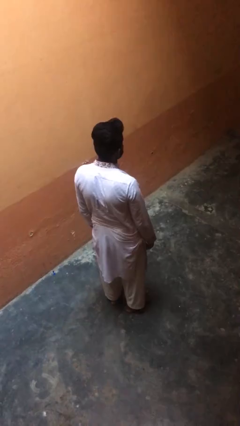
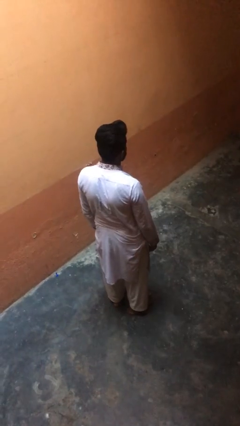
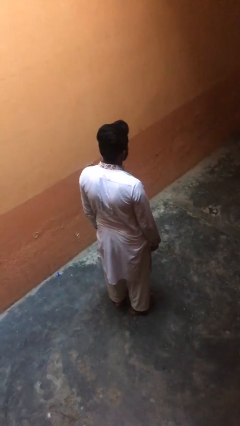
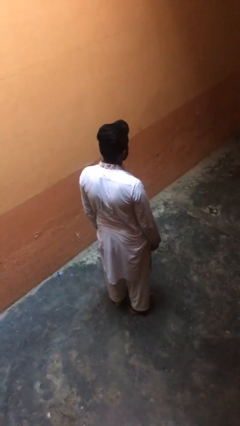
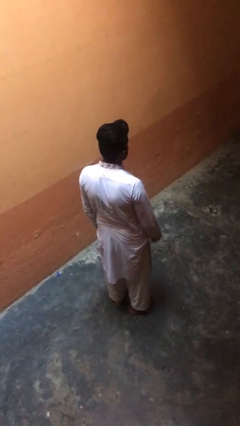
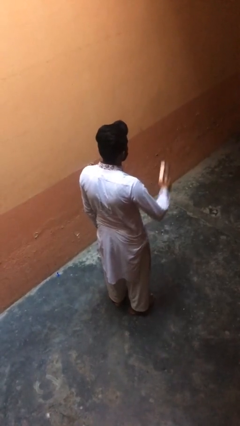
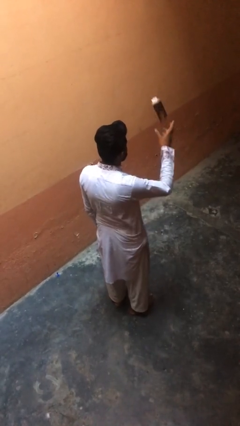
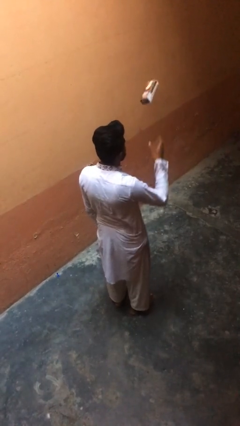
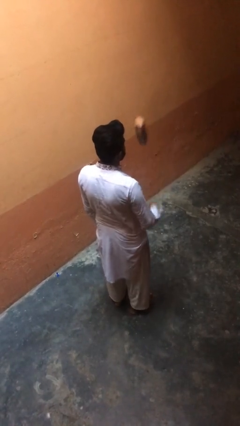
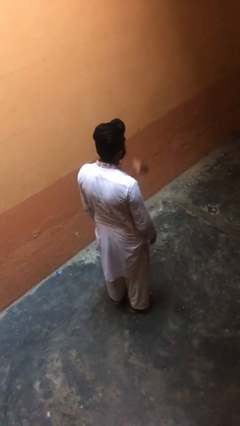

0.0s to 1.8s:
person throws object into air

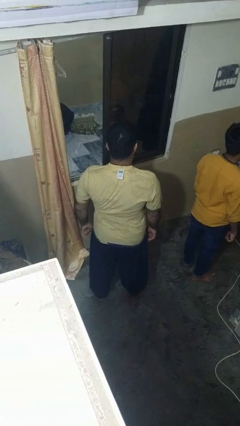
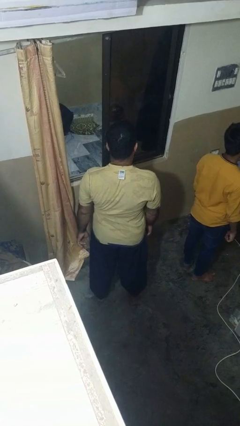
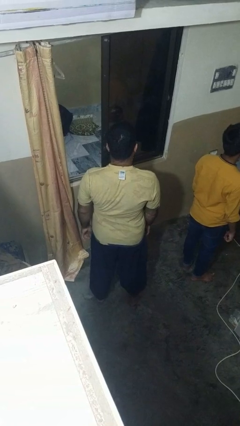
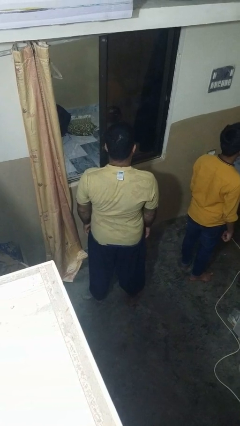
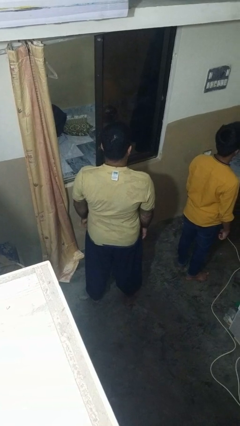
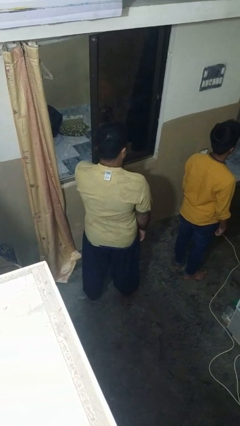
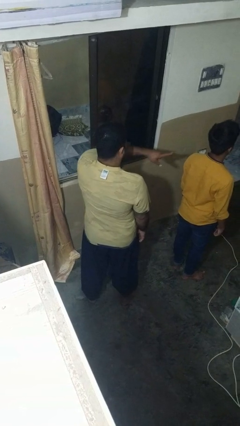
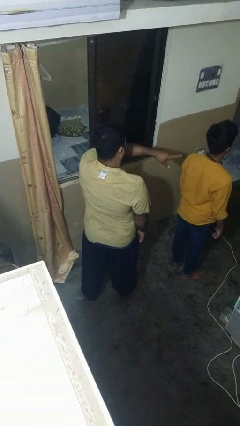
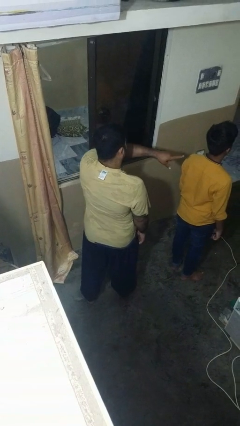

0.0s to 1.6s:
person points at person

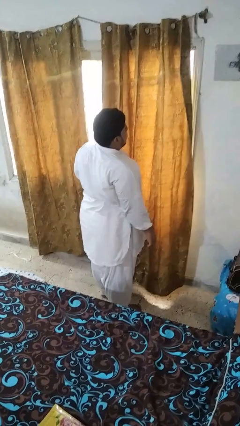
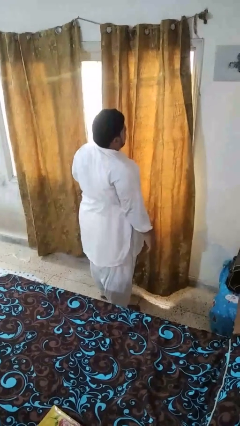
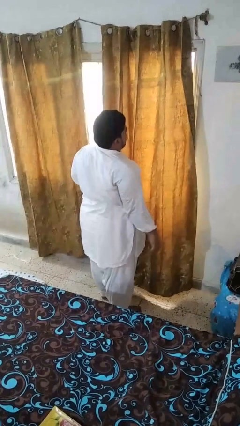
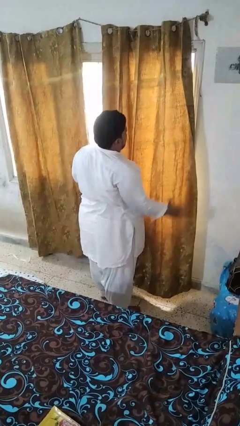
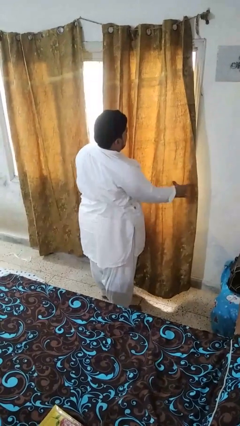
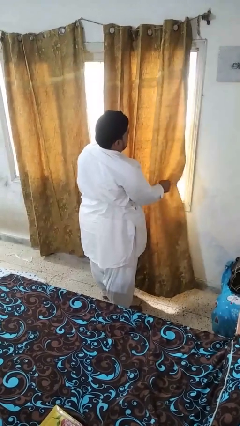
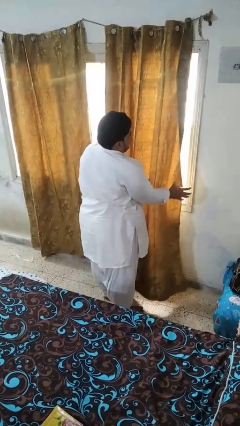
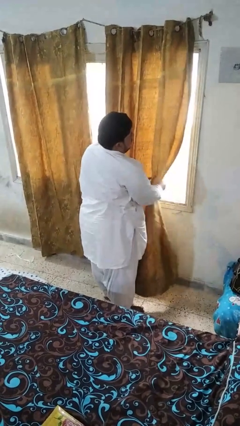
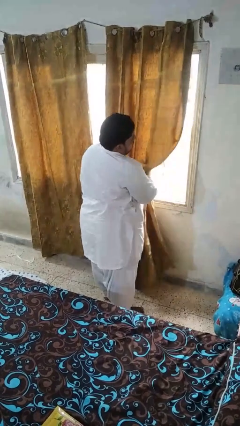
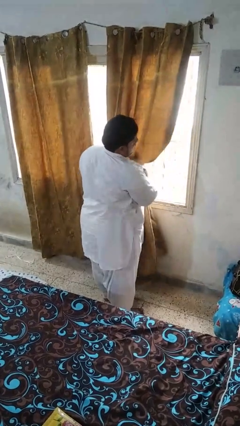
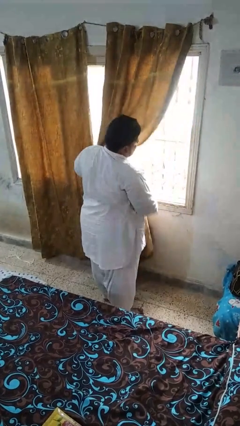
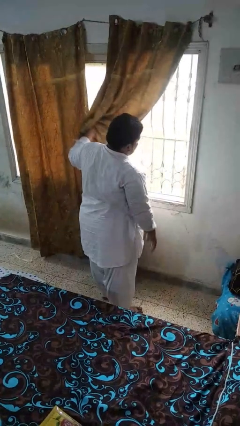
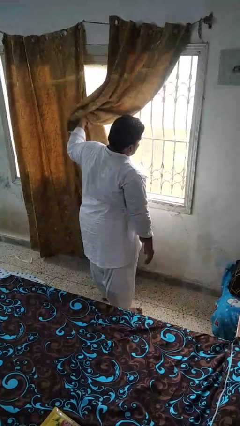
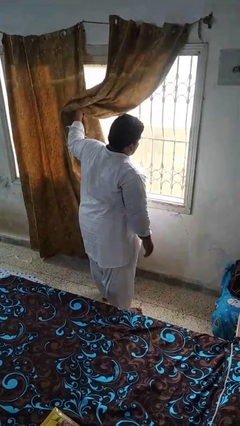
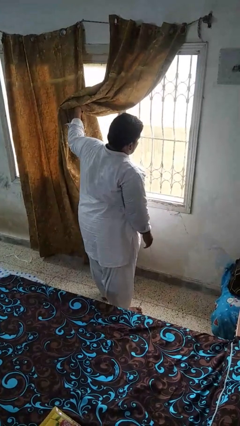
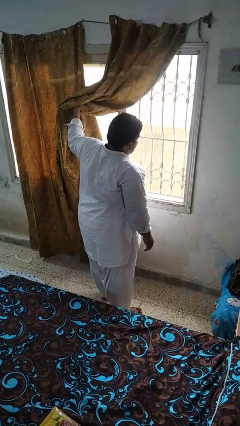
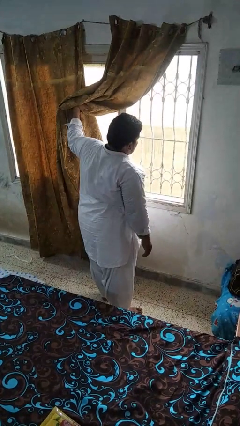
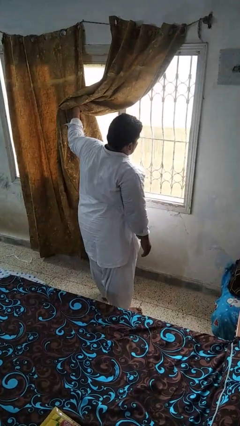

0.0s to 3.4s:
person opens curtains

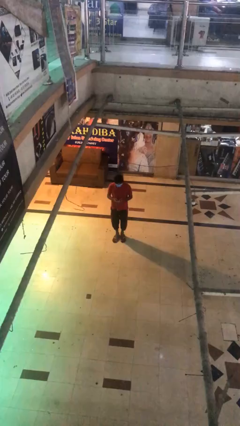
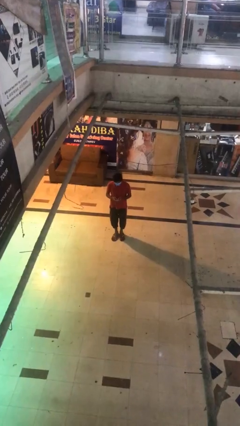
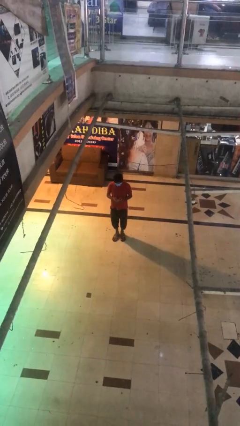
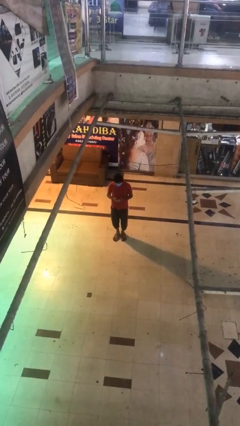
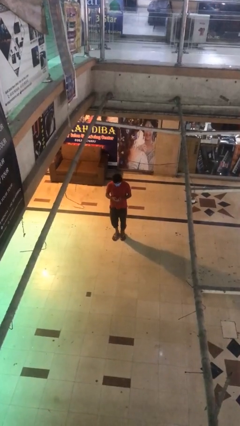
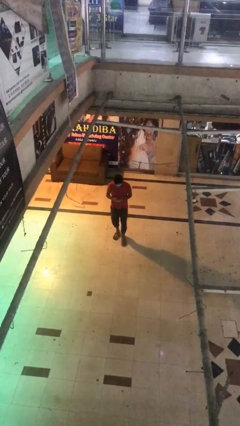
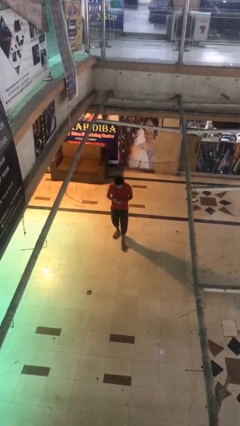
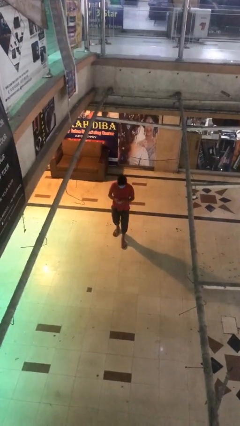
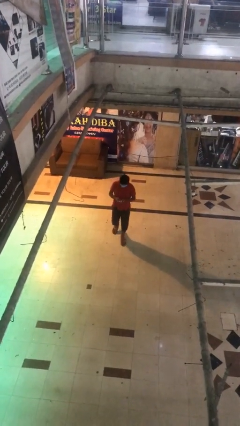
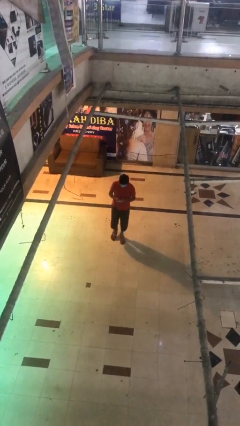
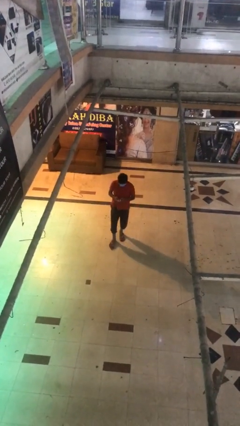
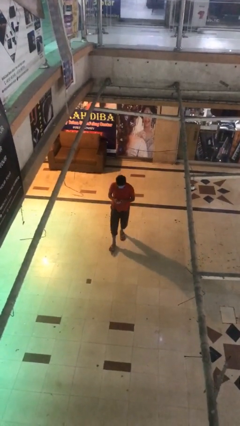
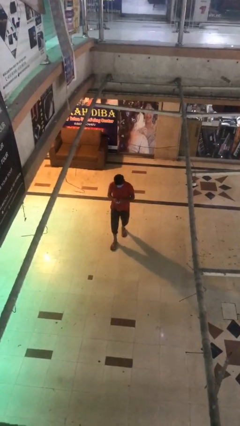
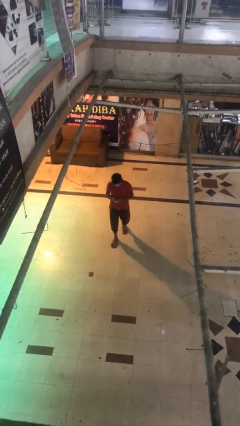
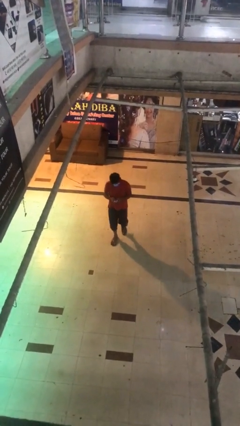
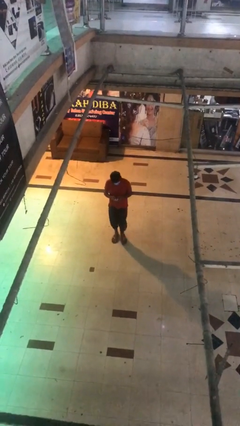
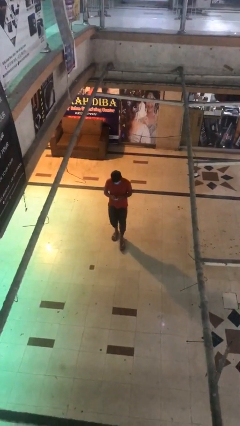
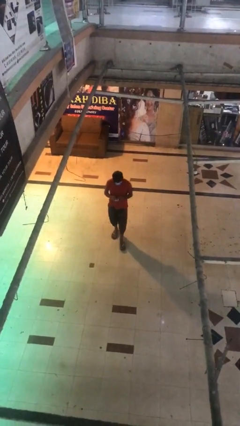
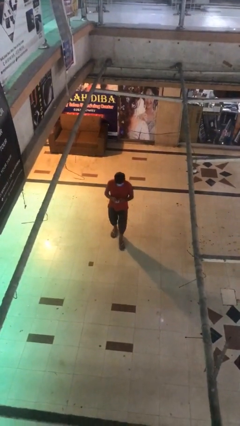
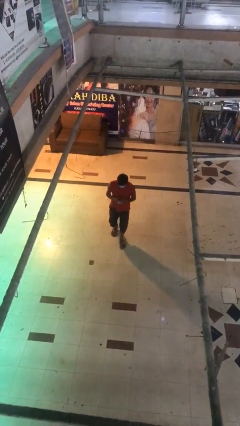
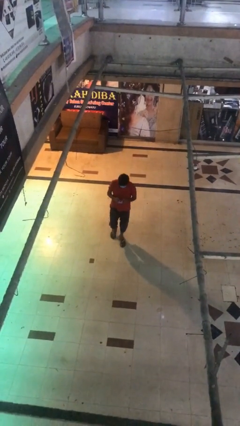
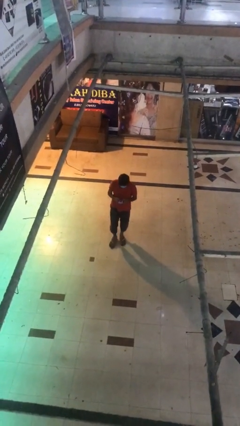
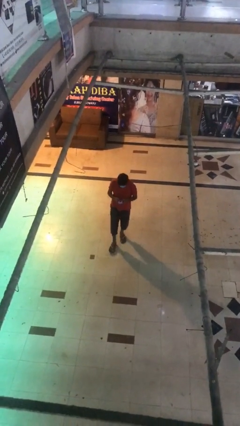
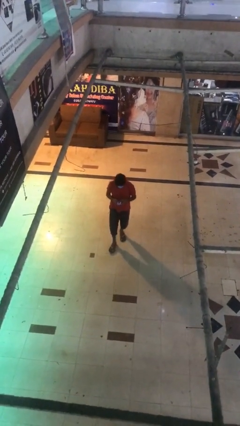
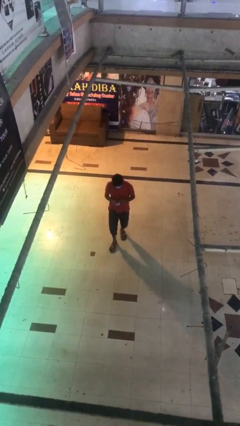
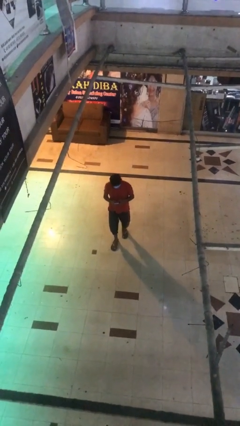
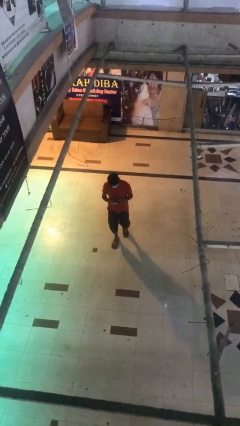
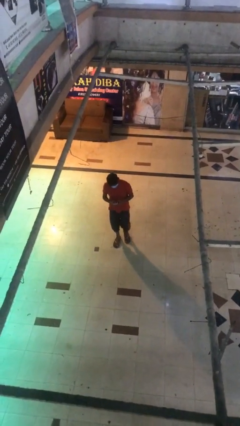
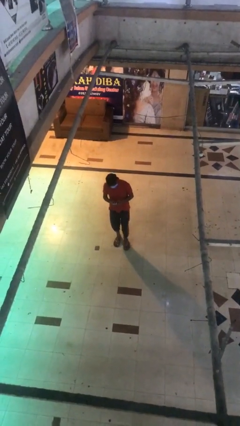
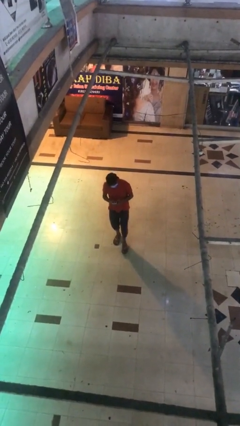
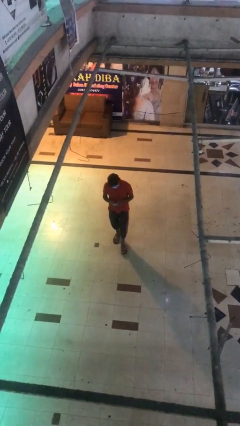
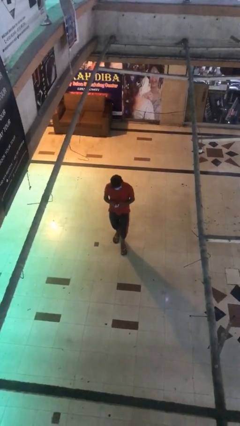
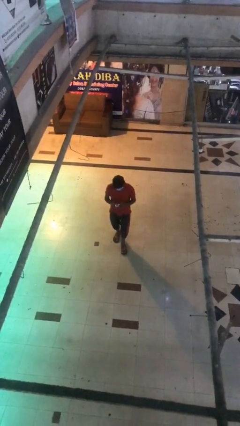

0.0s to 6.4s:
person texts on phone

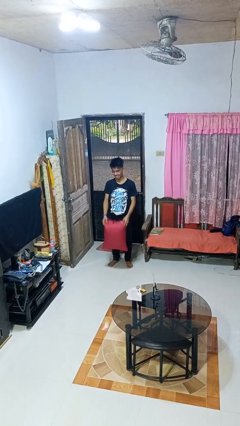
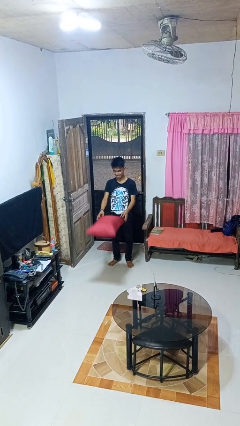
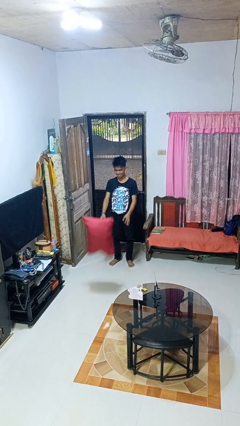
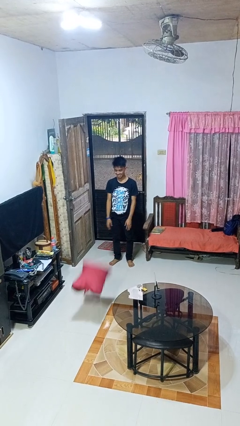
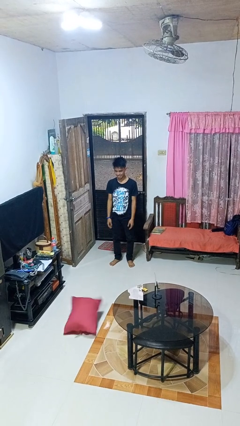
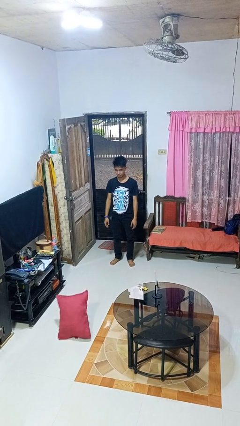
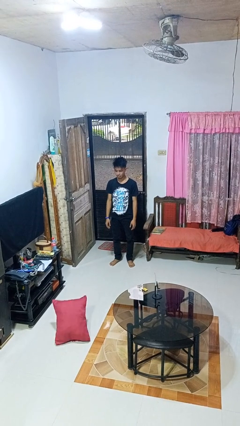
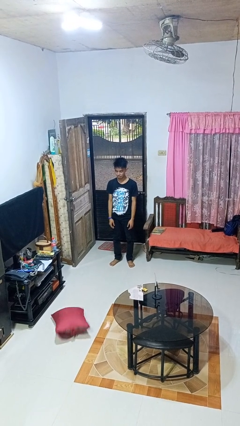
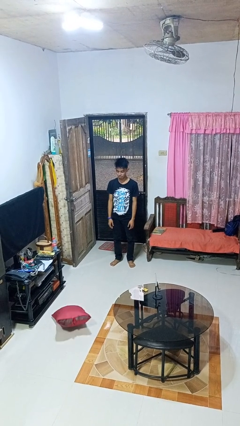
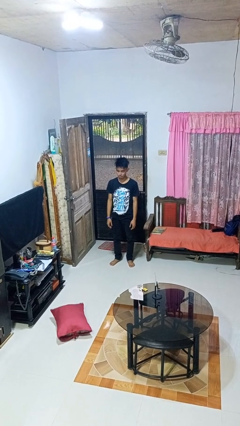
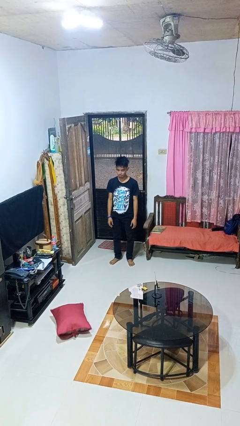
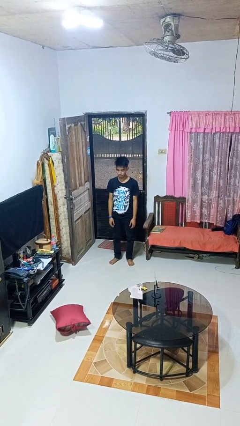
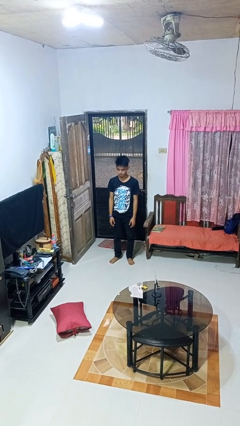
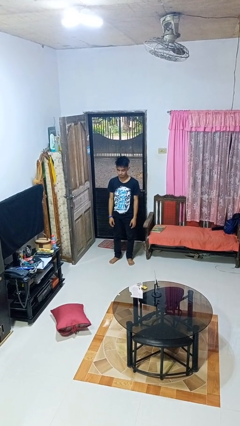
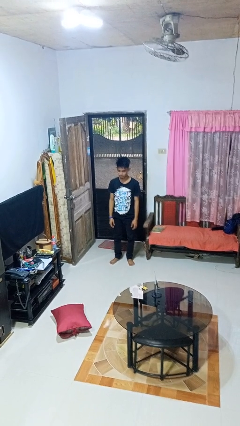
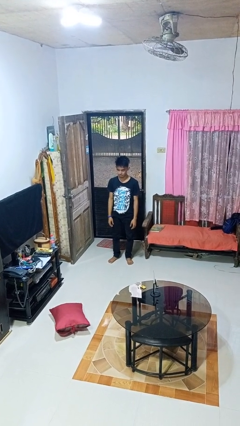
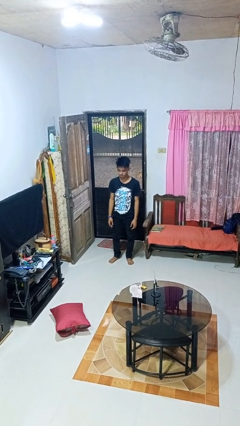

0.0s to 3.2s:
person throws object to ground

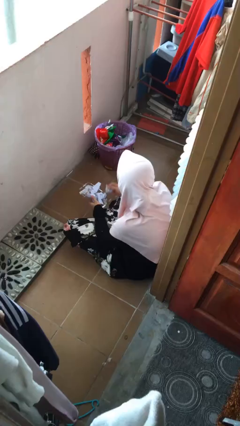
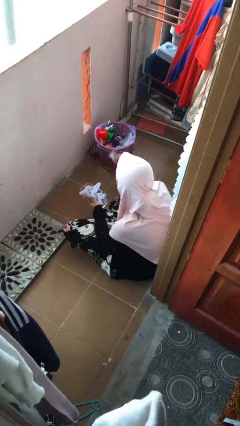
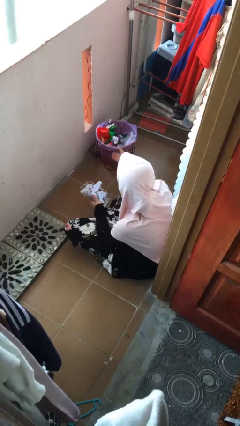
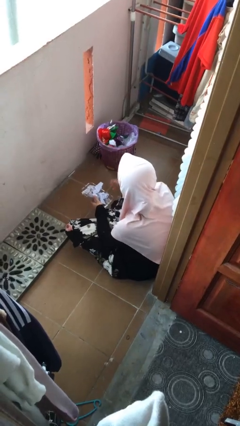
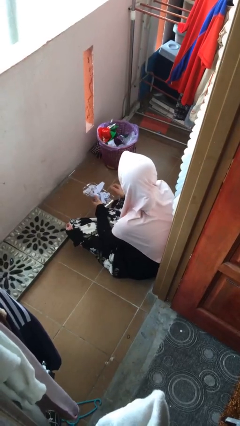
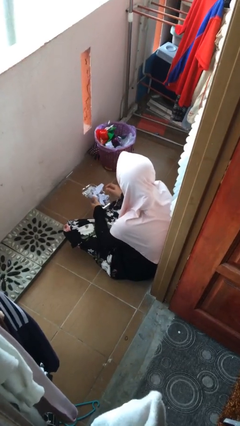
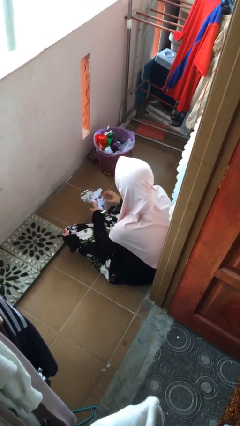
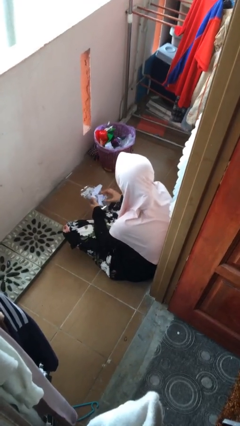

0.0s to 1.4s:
person discards trash
